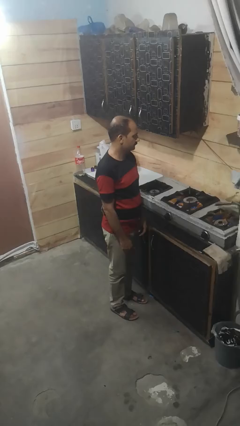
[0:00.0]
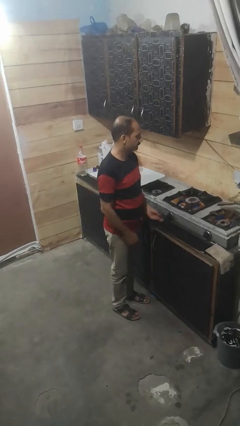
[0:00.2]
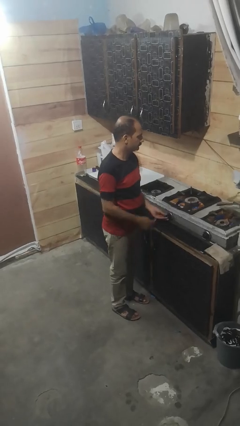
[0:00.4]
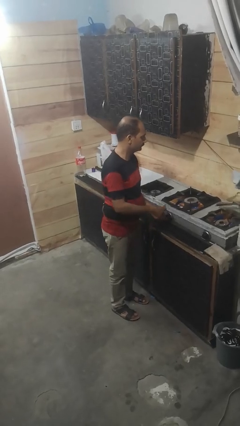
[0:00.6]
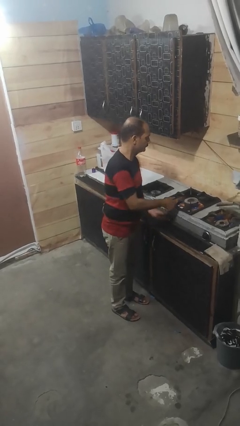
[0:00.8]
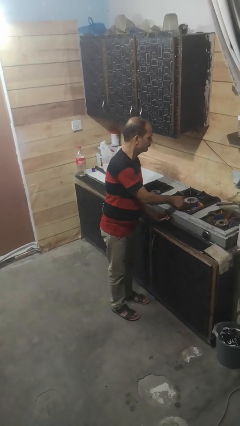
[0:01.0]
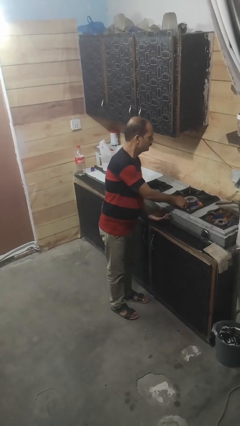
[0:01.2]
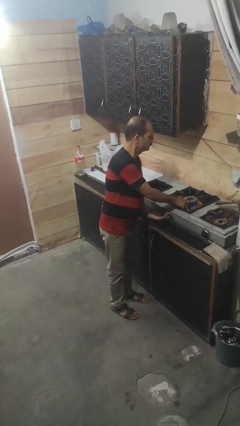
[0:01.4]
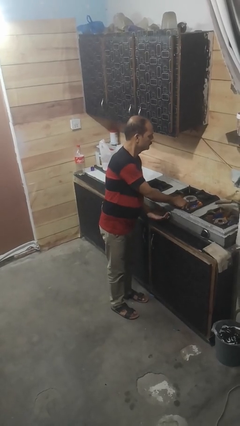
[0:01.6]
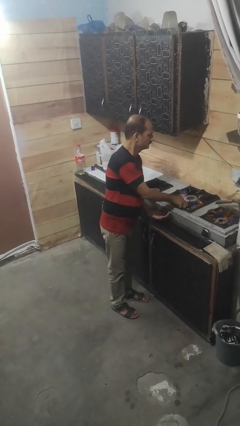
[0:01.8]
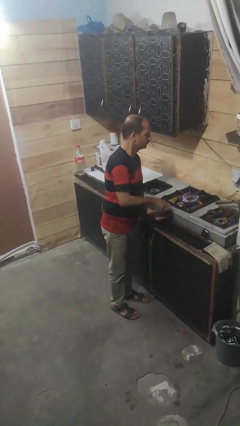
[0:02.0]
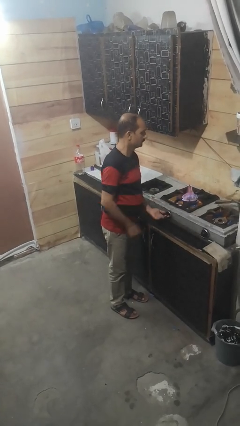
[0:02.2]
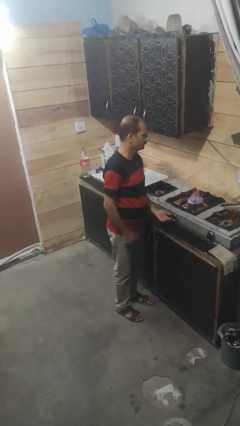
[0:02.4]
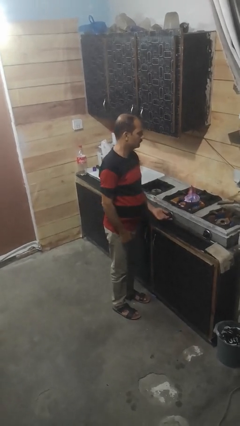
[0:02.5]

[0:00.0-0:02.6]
person turns on stovetop

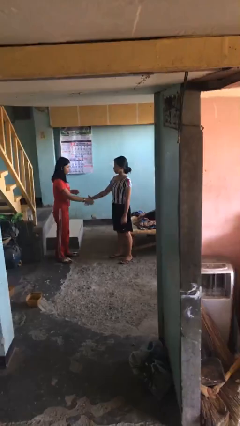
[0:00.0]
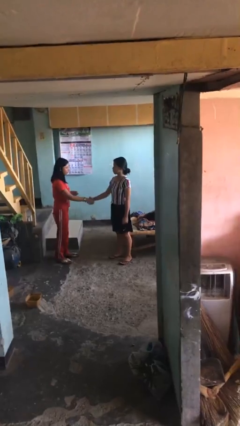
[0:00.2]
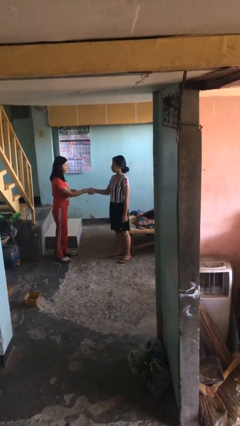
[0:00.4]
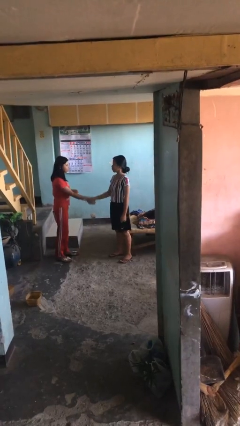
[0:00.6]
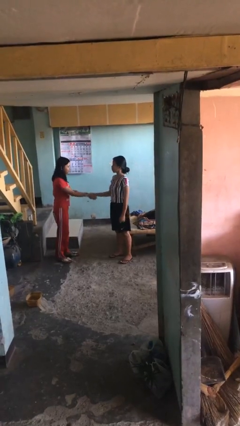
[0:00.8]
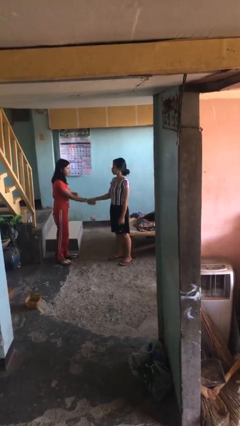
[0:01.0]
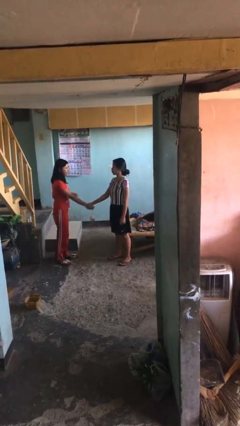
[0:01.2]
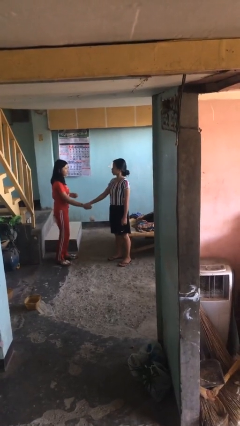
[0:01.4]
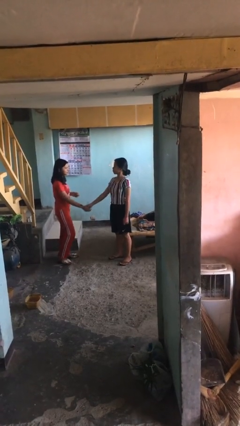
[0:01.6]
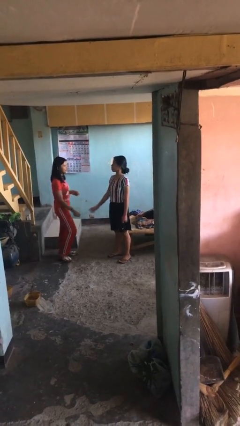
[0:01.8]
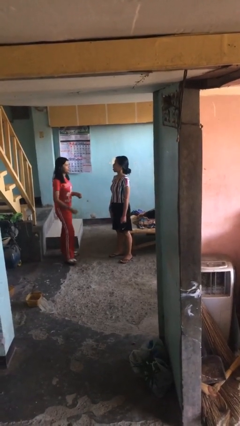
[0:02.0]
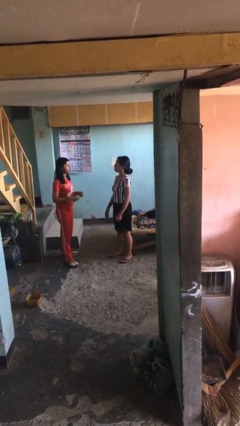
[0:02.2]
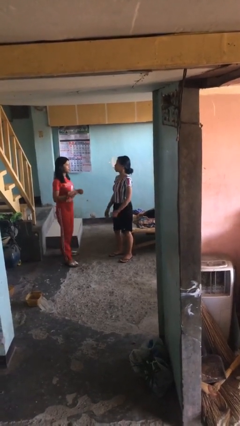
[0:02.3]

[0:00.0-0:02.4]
person shakes hand

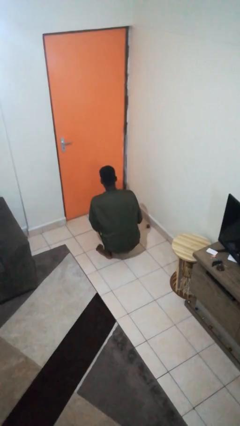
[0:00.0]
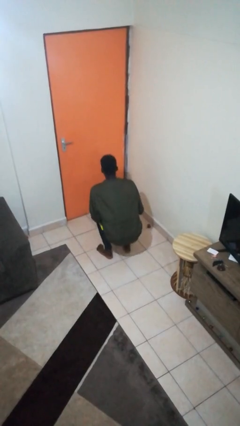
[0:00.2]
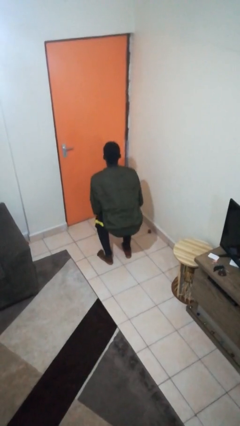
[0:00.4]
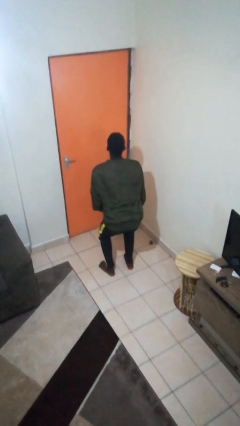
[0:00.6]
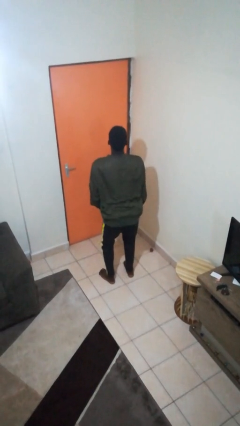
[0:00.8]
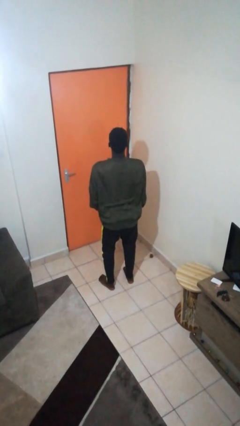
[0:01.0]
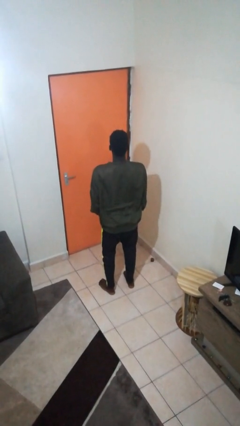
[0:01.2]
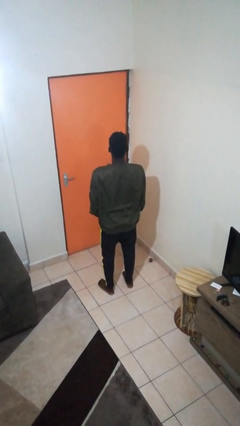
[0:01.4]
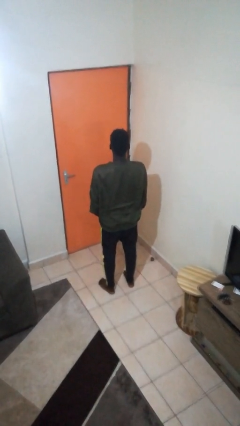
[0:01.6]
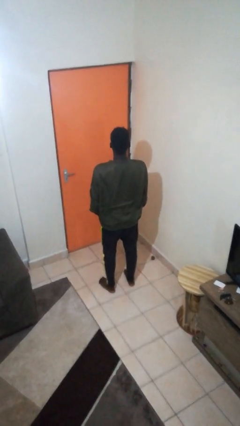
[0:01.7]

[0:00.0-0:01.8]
person stands up

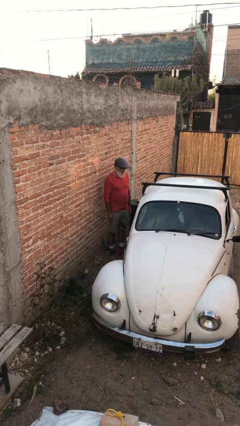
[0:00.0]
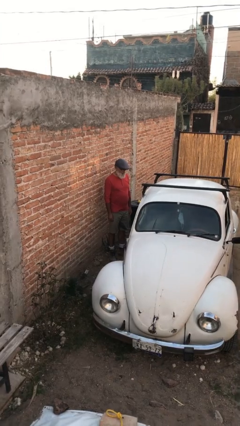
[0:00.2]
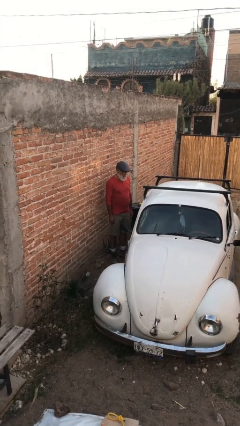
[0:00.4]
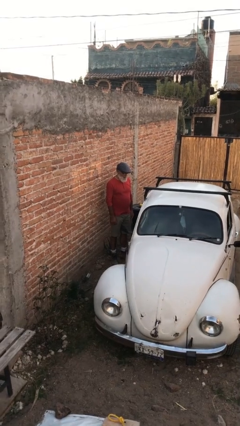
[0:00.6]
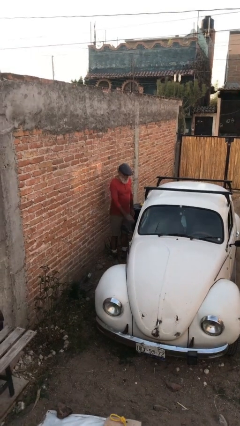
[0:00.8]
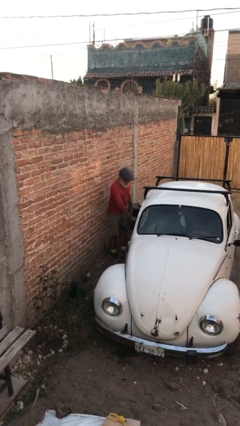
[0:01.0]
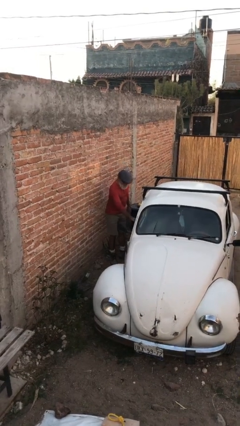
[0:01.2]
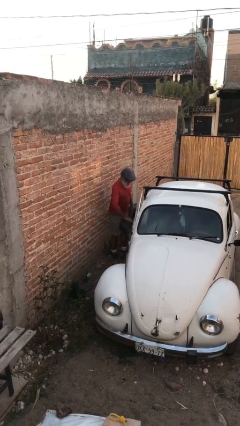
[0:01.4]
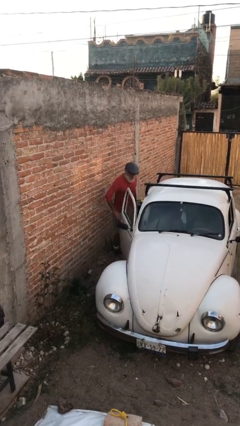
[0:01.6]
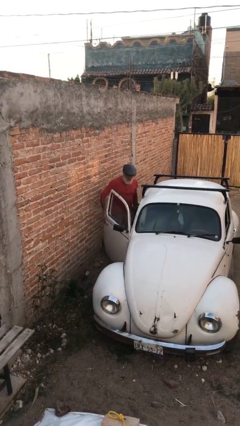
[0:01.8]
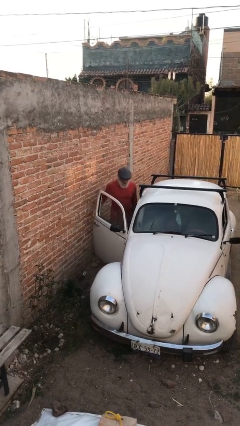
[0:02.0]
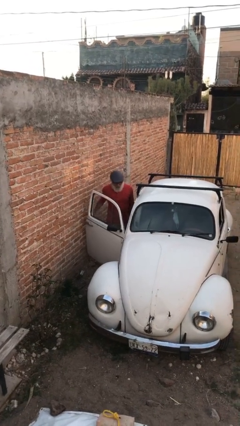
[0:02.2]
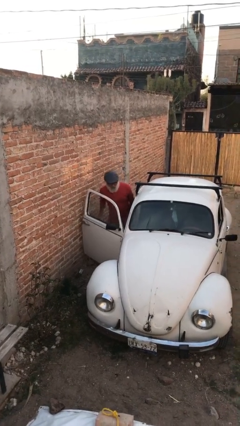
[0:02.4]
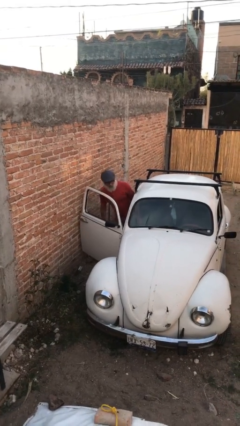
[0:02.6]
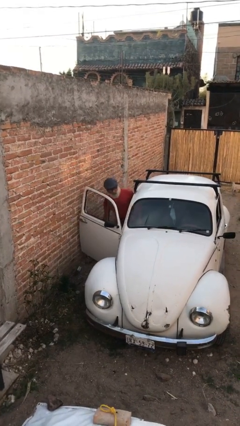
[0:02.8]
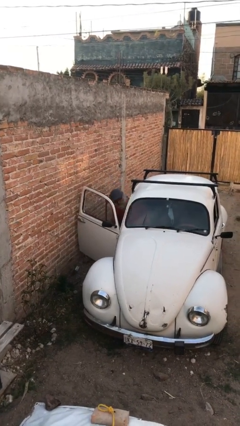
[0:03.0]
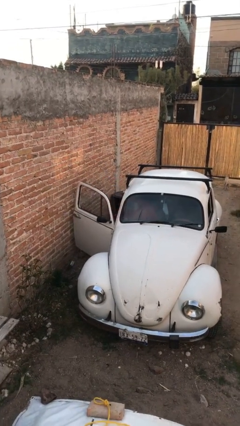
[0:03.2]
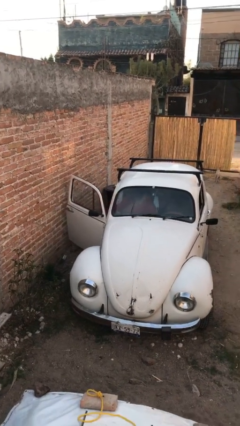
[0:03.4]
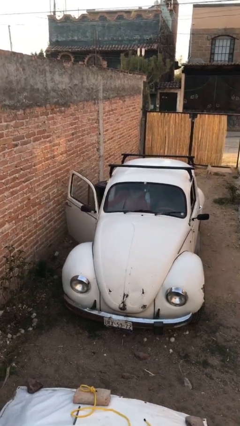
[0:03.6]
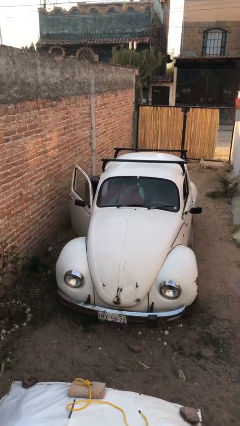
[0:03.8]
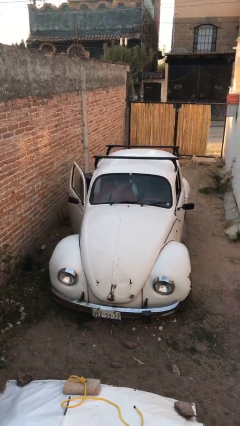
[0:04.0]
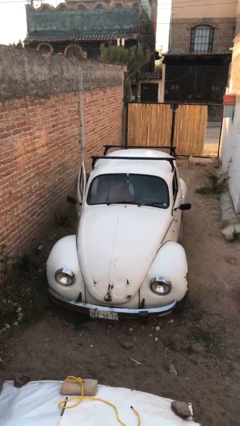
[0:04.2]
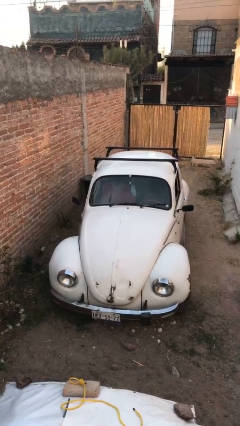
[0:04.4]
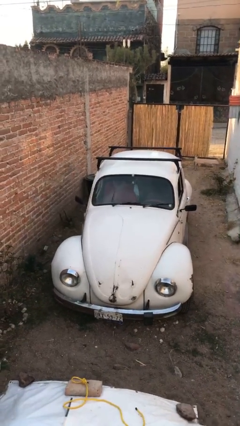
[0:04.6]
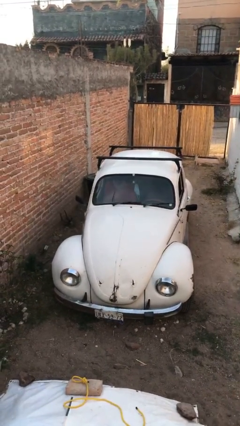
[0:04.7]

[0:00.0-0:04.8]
car picks up person

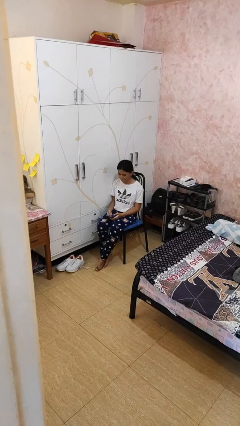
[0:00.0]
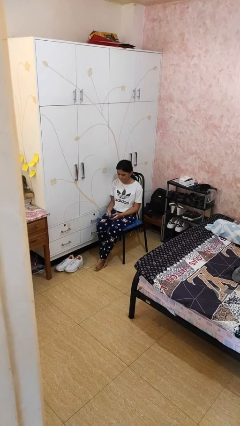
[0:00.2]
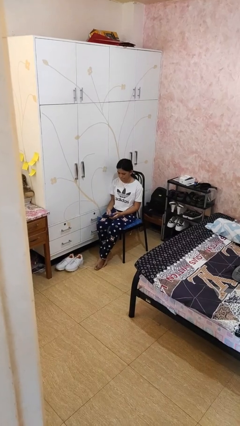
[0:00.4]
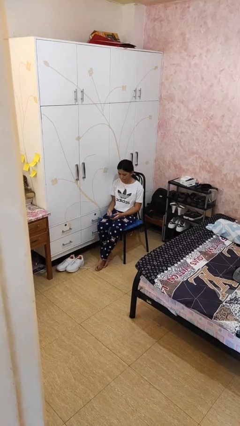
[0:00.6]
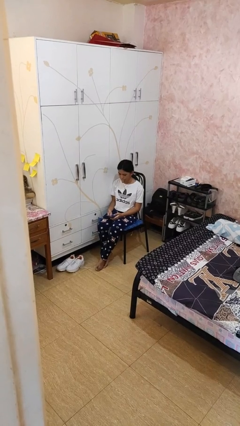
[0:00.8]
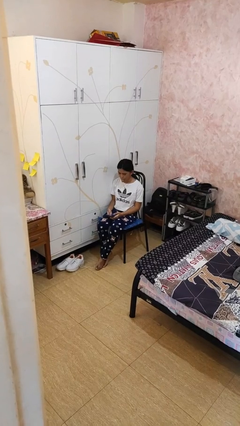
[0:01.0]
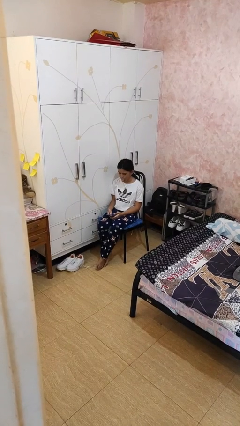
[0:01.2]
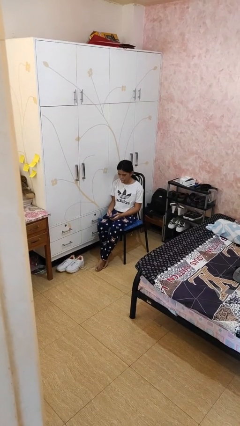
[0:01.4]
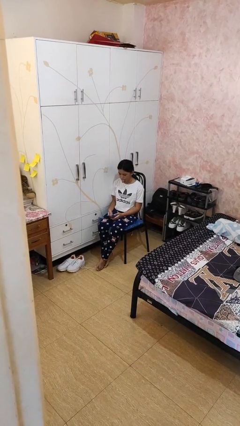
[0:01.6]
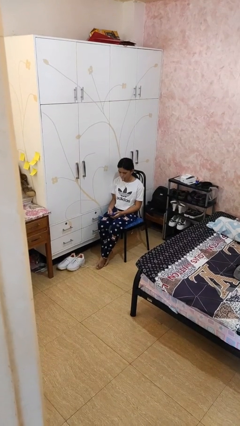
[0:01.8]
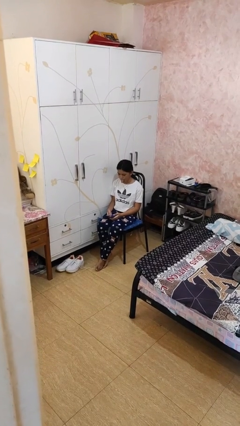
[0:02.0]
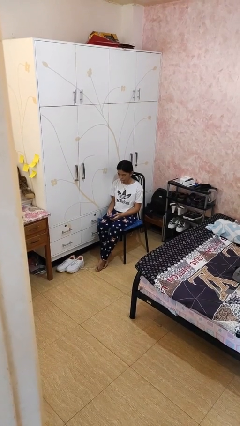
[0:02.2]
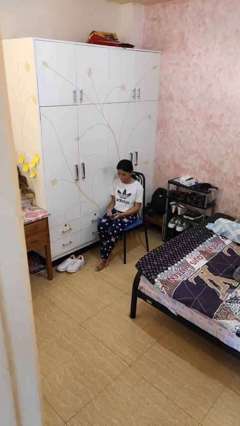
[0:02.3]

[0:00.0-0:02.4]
person sticks out tongue

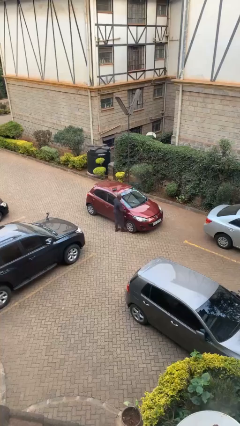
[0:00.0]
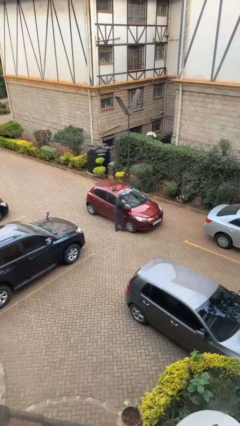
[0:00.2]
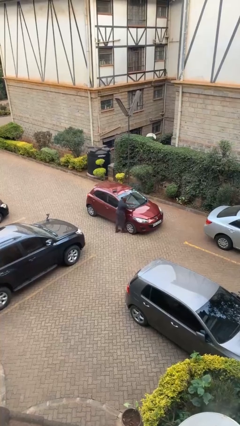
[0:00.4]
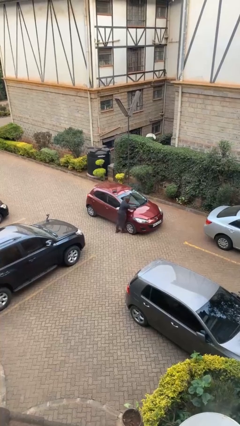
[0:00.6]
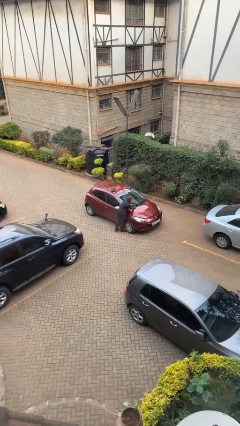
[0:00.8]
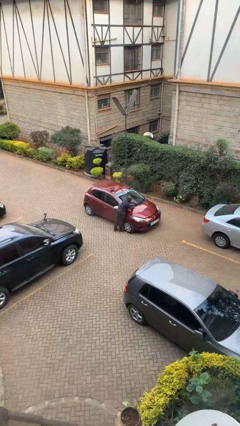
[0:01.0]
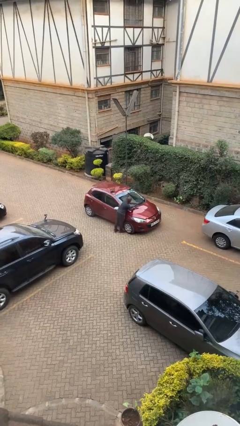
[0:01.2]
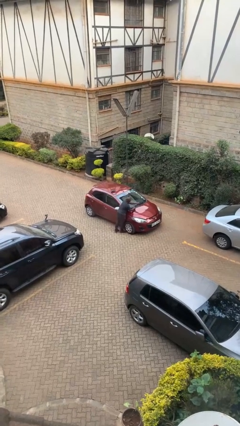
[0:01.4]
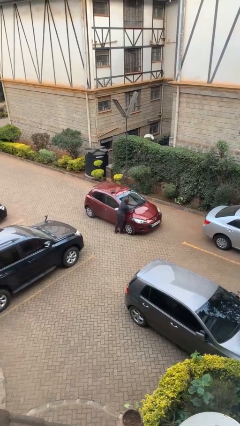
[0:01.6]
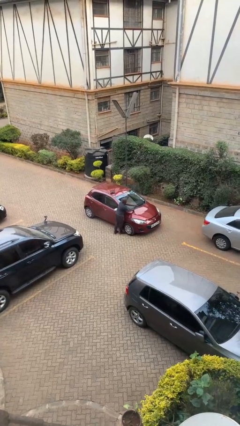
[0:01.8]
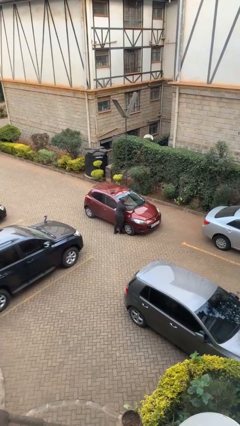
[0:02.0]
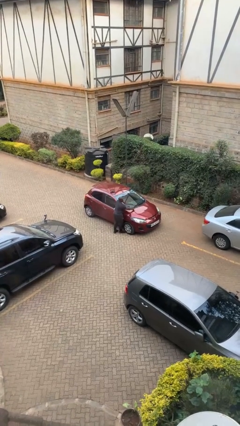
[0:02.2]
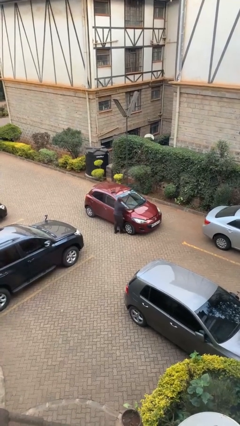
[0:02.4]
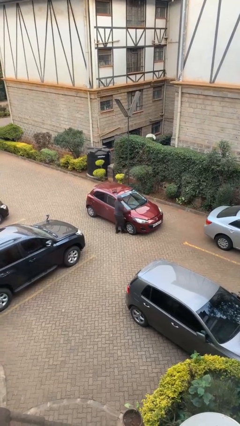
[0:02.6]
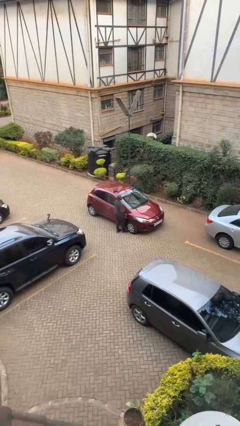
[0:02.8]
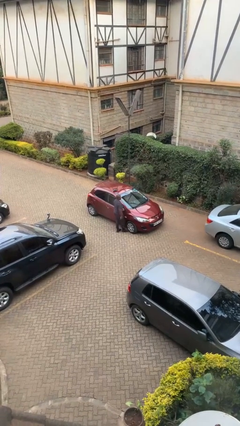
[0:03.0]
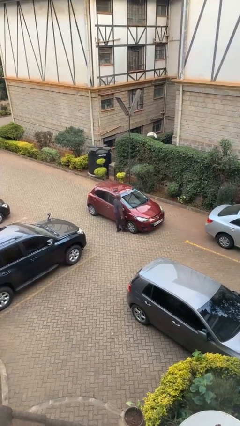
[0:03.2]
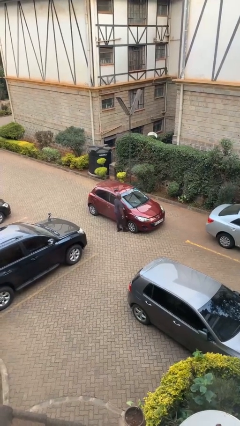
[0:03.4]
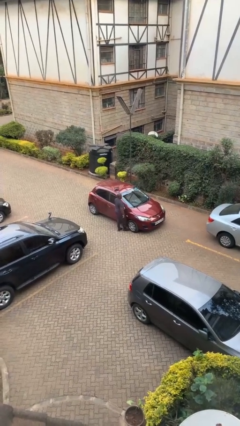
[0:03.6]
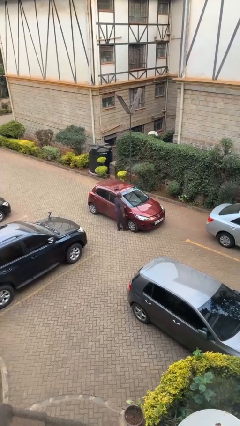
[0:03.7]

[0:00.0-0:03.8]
person flips up car wipers
